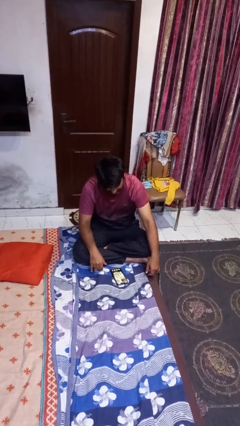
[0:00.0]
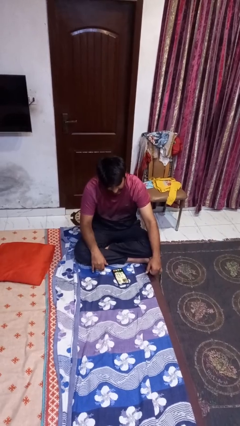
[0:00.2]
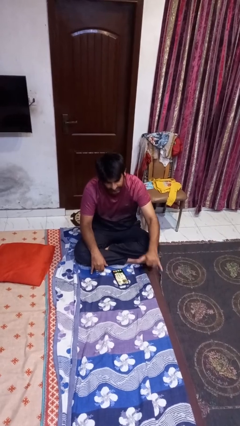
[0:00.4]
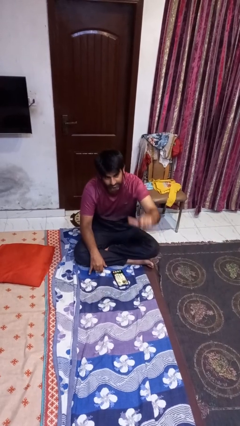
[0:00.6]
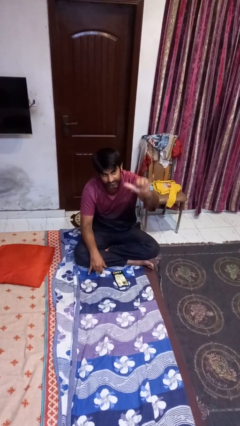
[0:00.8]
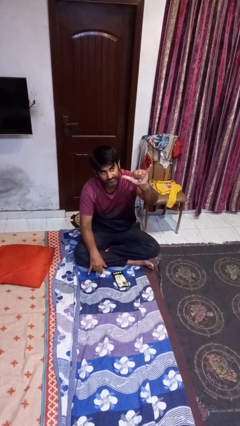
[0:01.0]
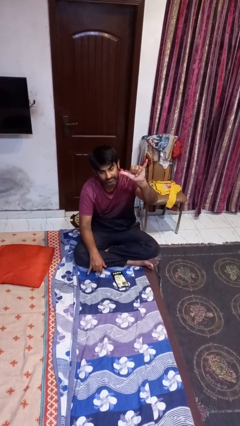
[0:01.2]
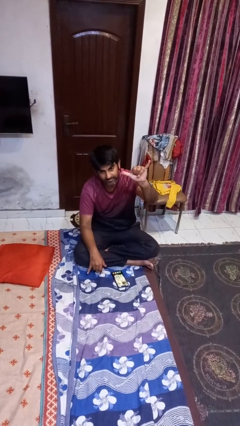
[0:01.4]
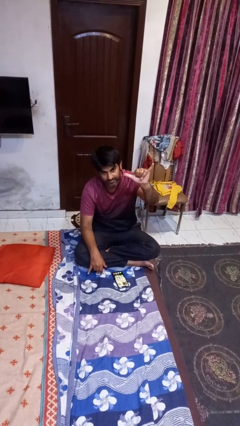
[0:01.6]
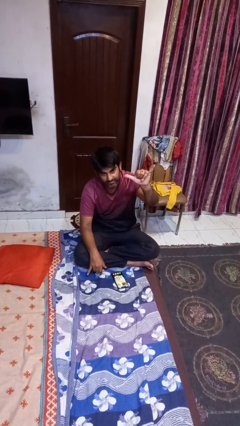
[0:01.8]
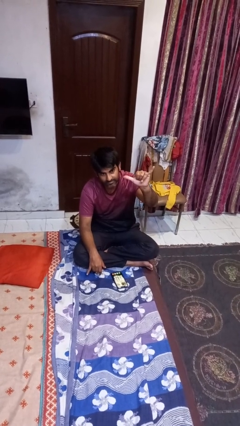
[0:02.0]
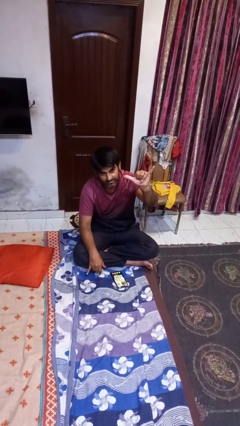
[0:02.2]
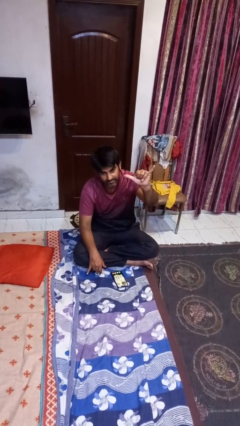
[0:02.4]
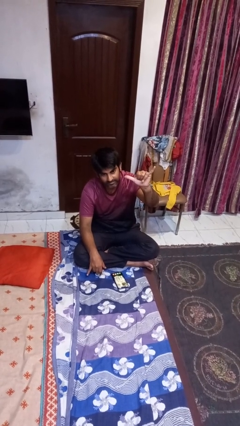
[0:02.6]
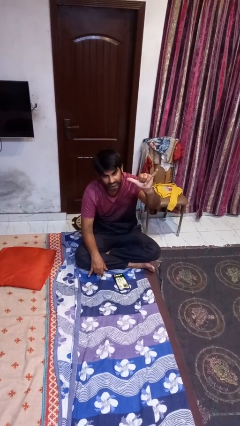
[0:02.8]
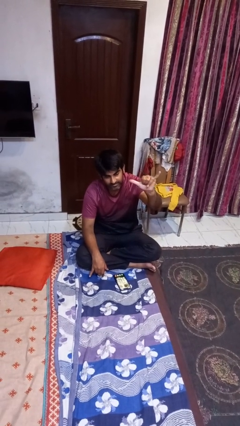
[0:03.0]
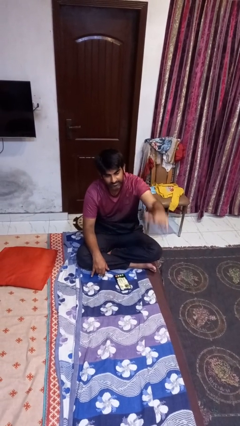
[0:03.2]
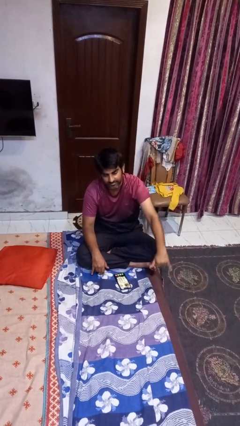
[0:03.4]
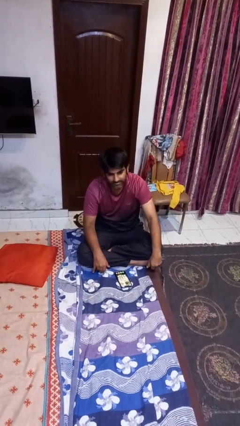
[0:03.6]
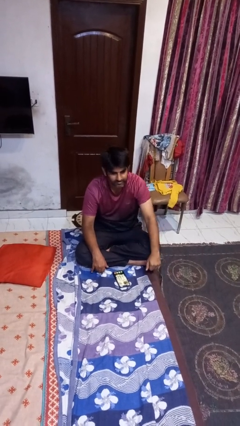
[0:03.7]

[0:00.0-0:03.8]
person gestures hang loose

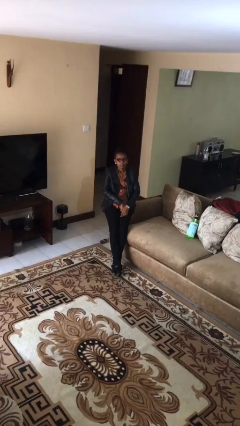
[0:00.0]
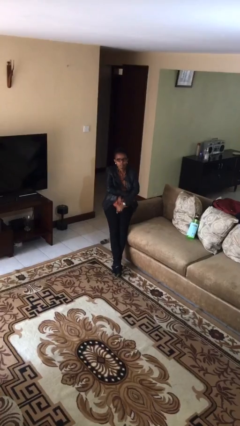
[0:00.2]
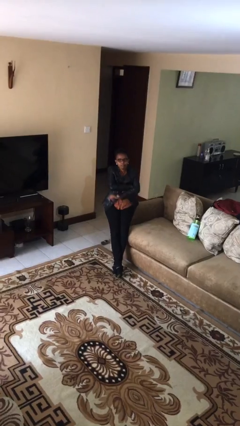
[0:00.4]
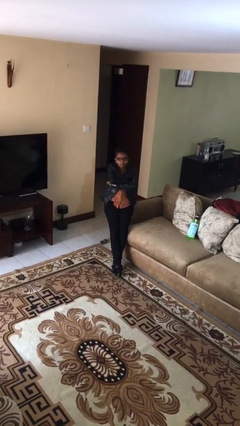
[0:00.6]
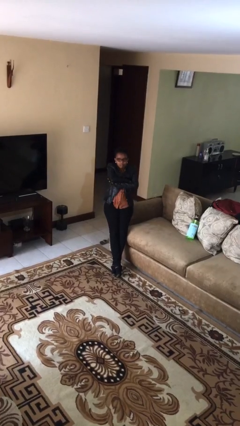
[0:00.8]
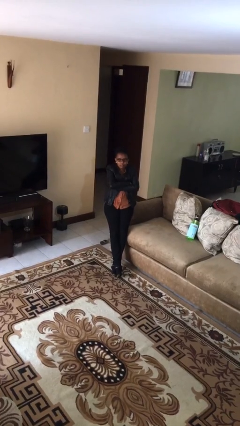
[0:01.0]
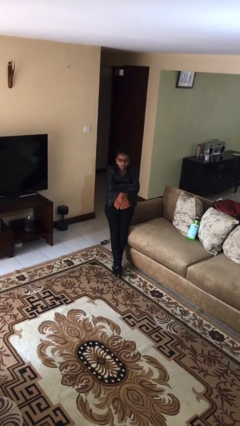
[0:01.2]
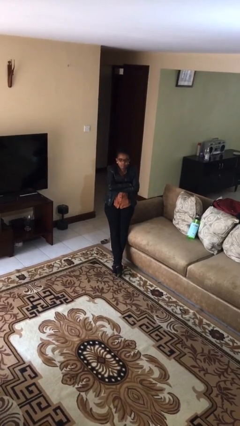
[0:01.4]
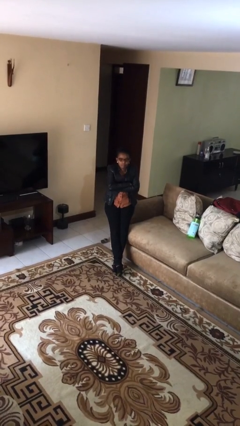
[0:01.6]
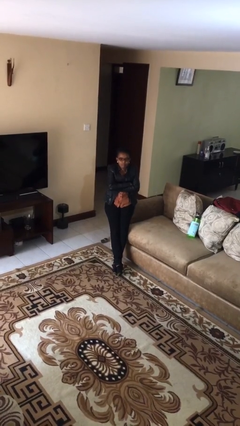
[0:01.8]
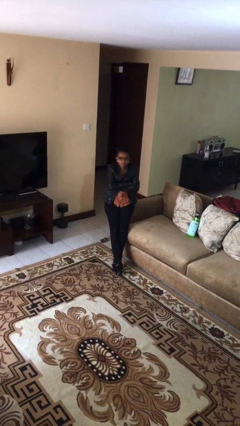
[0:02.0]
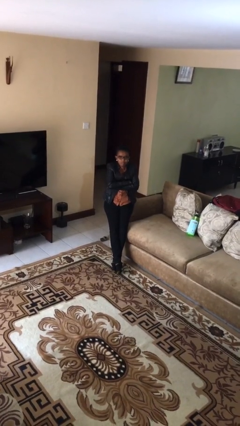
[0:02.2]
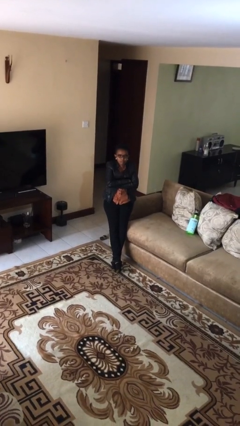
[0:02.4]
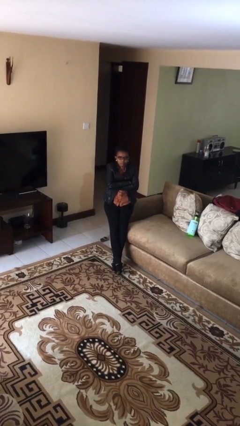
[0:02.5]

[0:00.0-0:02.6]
person crosses arms

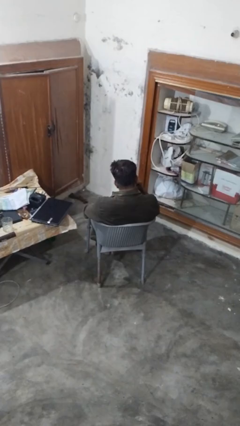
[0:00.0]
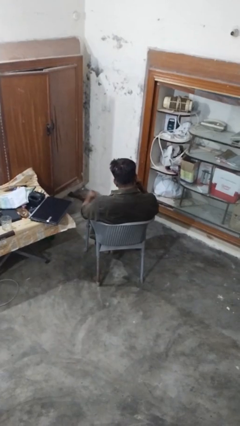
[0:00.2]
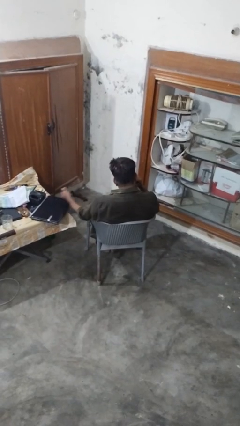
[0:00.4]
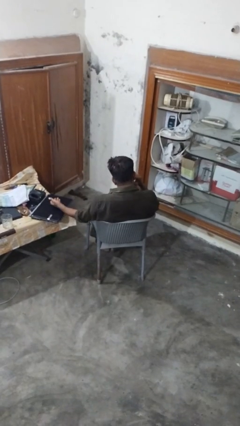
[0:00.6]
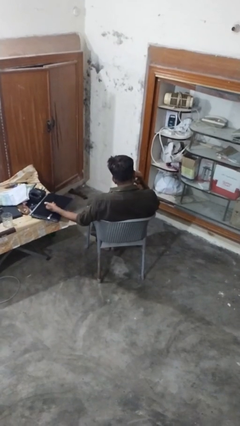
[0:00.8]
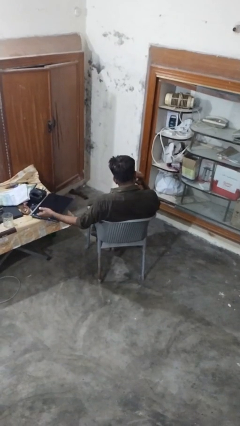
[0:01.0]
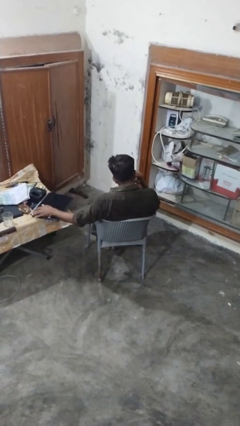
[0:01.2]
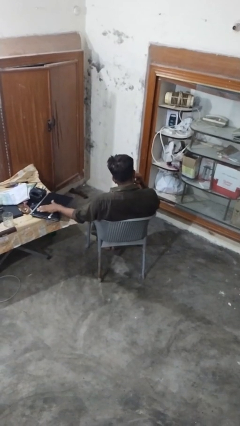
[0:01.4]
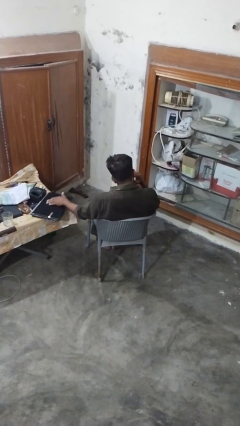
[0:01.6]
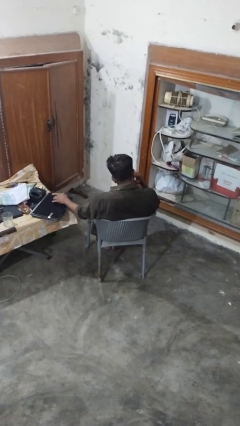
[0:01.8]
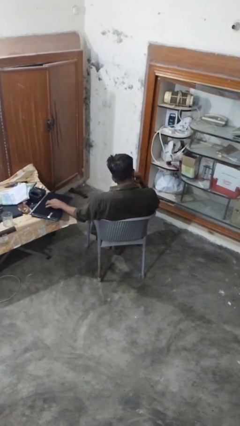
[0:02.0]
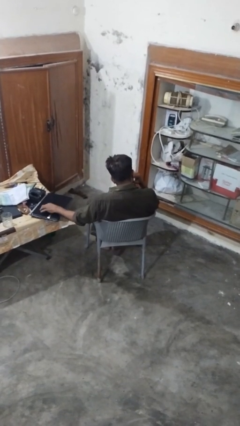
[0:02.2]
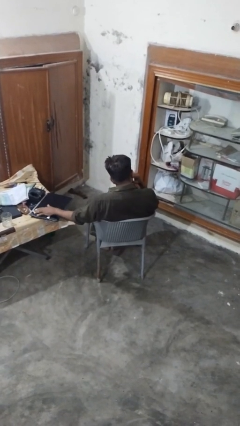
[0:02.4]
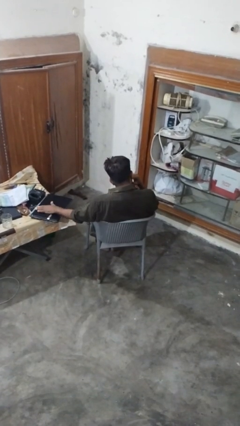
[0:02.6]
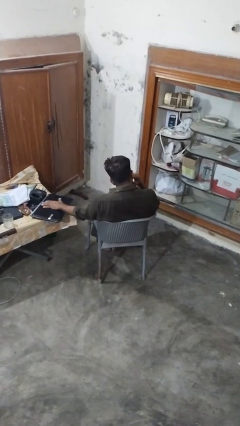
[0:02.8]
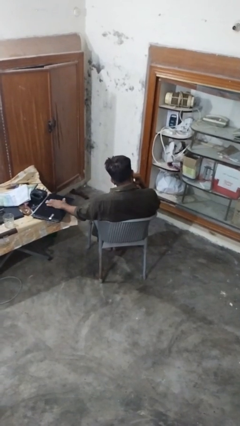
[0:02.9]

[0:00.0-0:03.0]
person waves hand over object

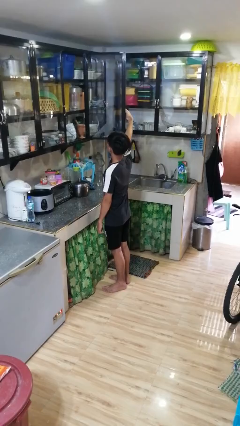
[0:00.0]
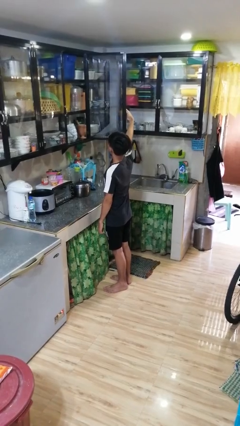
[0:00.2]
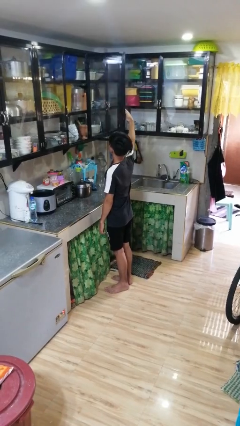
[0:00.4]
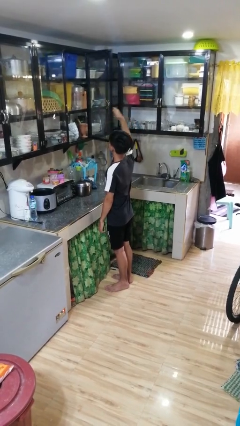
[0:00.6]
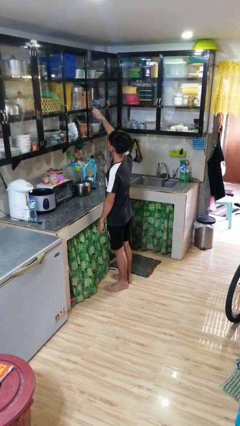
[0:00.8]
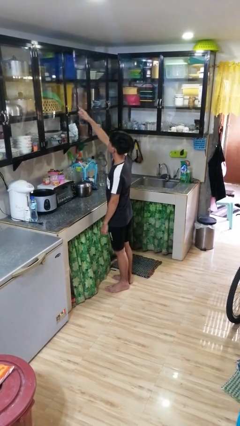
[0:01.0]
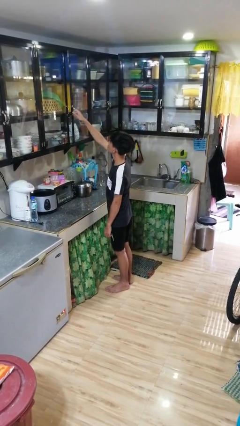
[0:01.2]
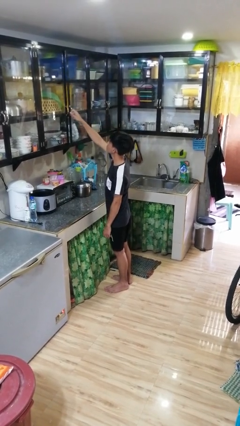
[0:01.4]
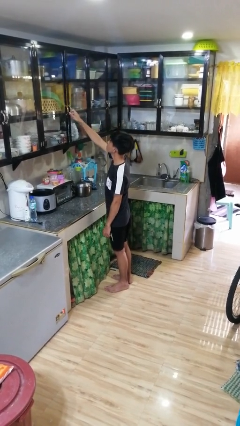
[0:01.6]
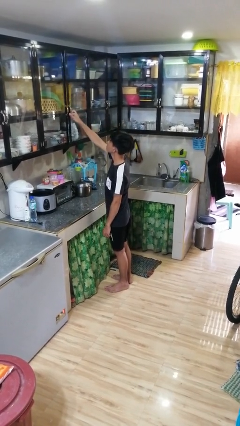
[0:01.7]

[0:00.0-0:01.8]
person closes cabinet

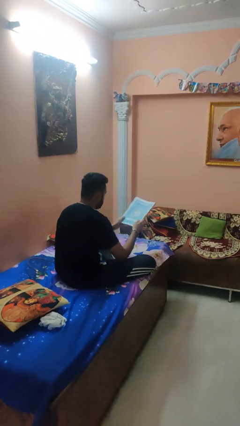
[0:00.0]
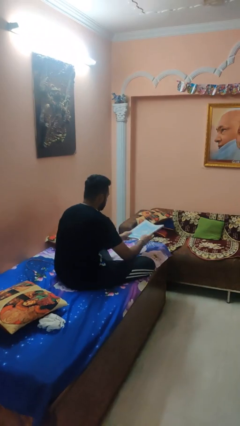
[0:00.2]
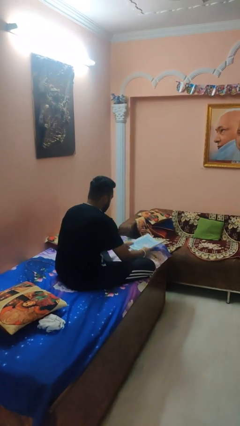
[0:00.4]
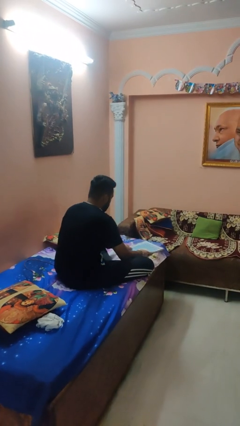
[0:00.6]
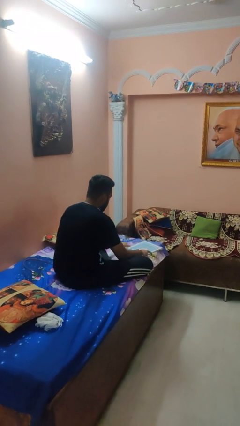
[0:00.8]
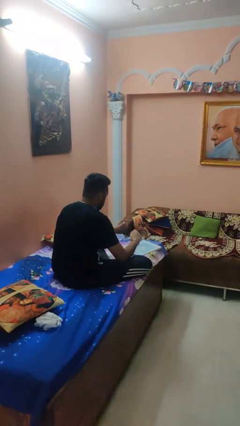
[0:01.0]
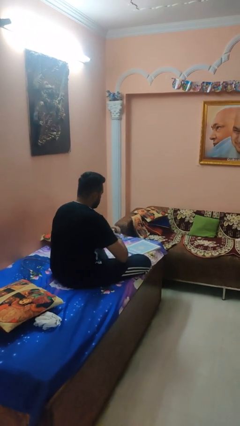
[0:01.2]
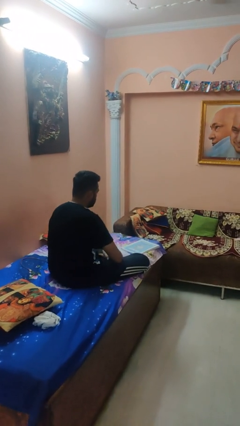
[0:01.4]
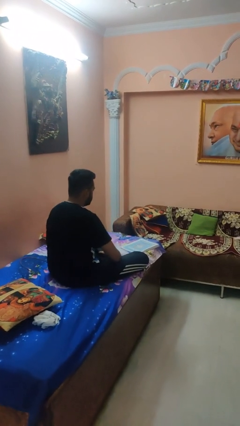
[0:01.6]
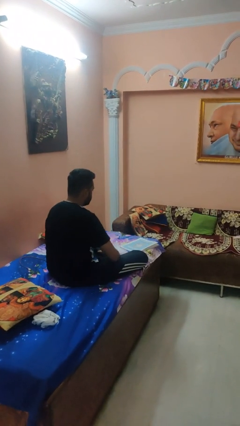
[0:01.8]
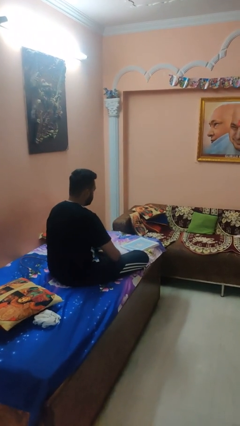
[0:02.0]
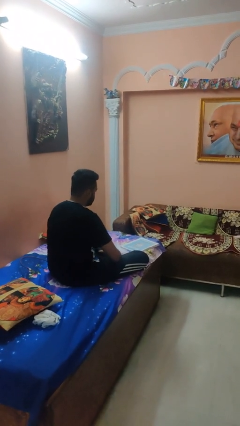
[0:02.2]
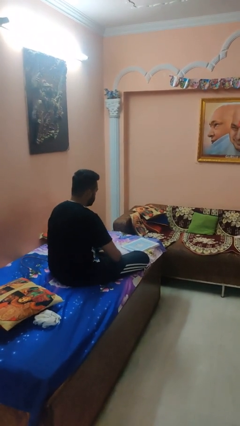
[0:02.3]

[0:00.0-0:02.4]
person puts down object on bed

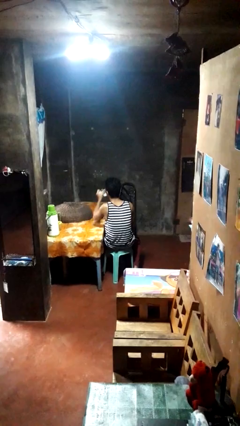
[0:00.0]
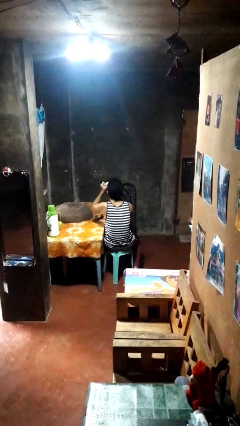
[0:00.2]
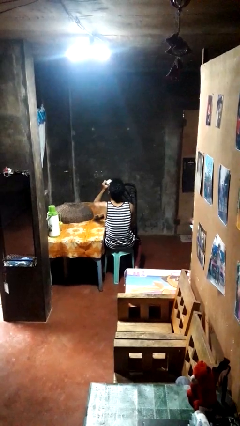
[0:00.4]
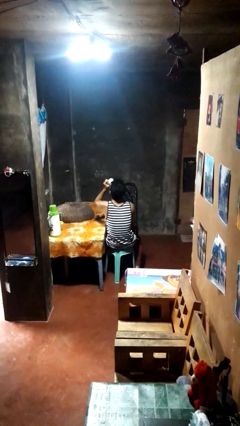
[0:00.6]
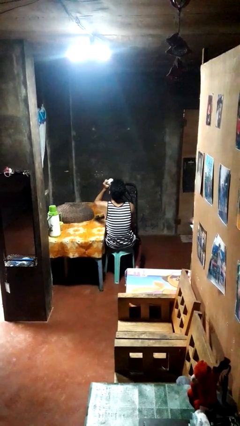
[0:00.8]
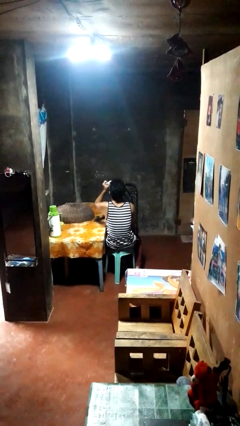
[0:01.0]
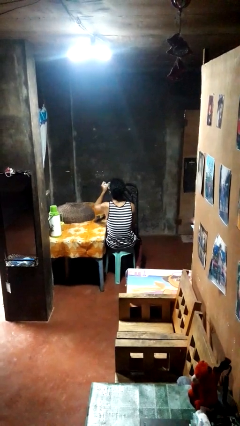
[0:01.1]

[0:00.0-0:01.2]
person drinks from mug

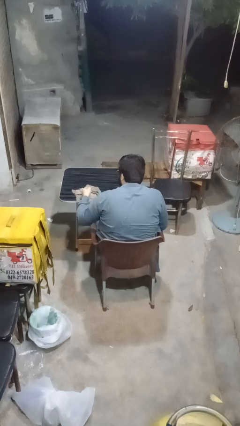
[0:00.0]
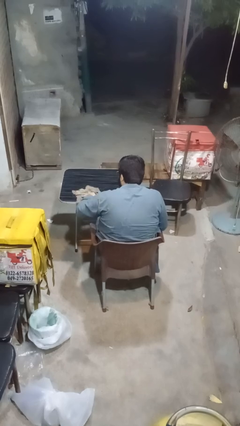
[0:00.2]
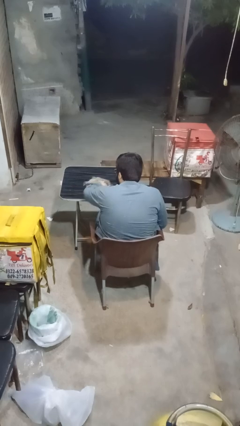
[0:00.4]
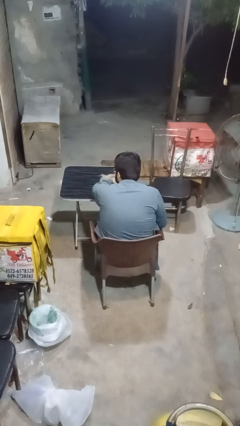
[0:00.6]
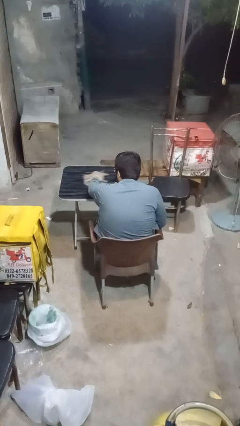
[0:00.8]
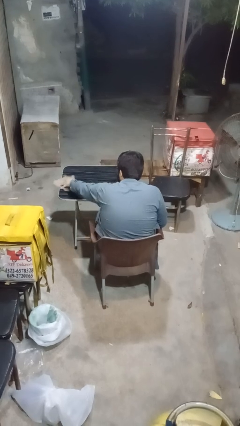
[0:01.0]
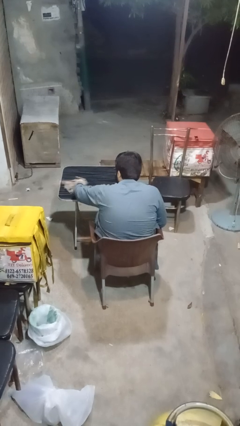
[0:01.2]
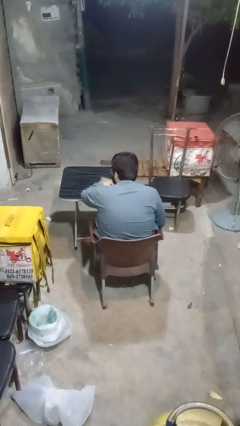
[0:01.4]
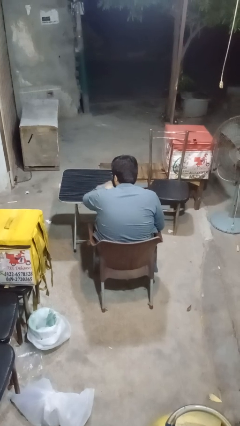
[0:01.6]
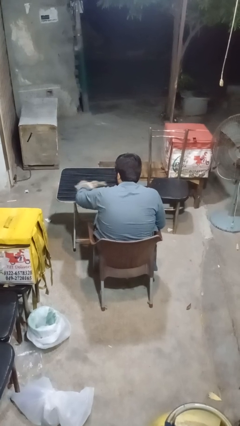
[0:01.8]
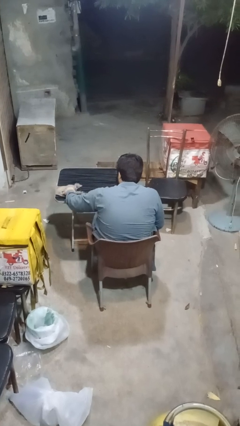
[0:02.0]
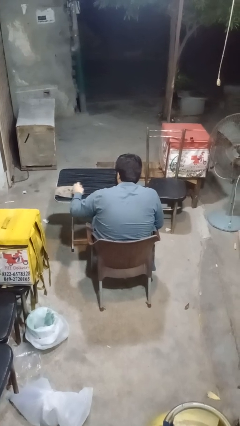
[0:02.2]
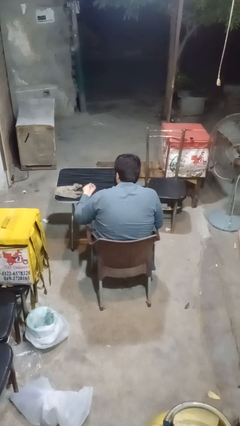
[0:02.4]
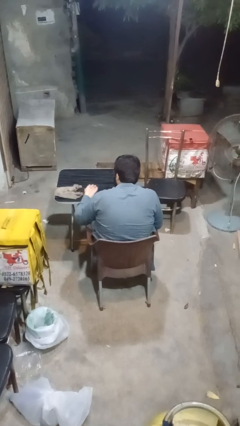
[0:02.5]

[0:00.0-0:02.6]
person cleans table with rag
